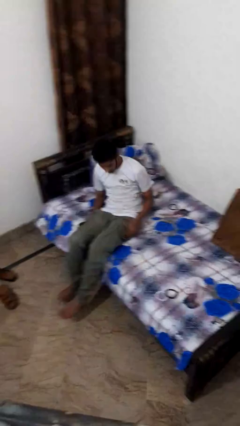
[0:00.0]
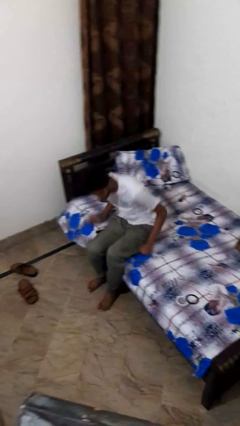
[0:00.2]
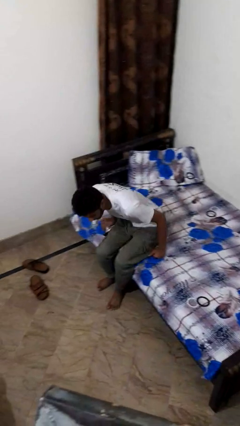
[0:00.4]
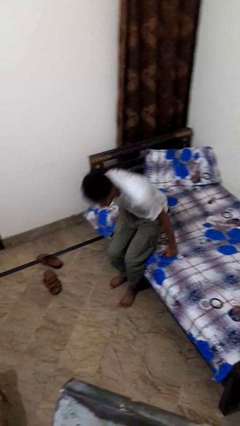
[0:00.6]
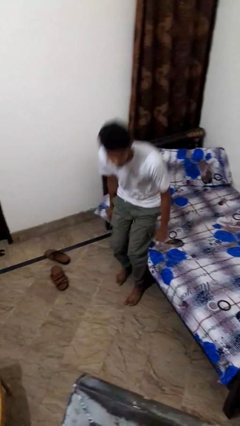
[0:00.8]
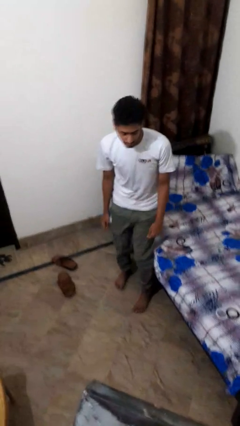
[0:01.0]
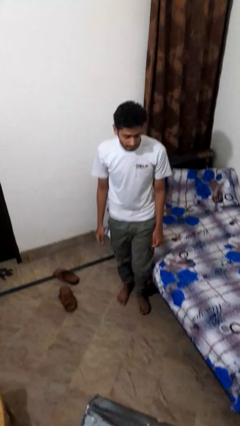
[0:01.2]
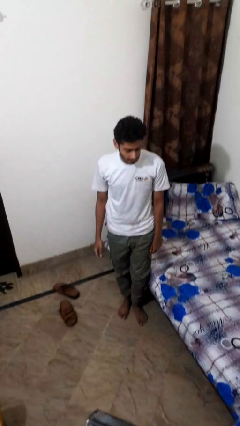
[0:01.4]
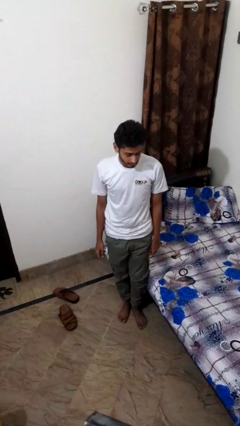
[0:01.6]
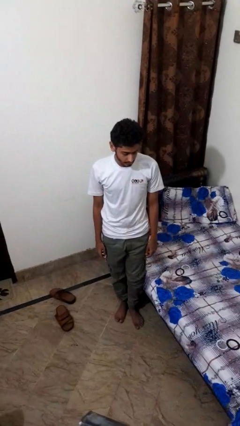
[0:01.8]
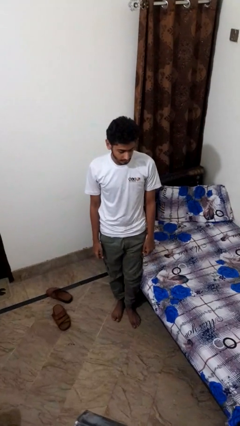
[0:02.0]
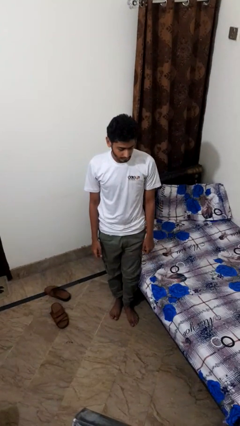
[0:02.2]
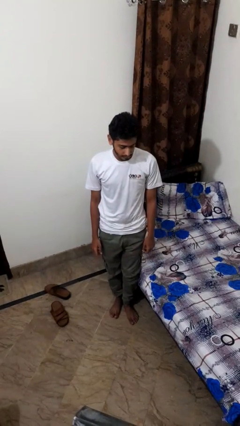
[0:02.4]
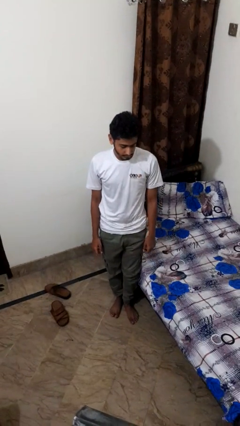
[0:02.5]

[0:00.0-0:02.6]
person stands up

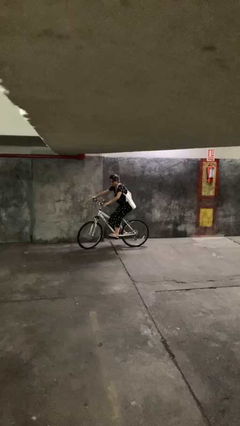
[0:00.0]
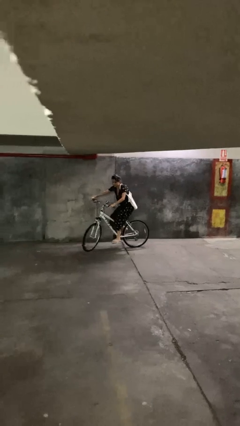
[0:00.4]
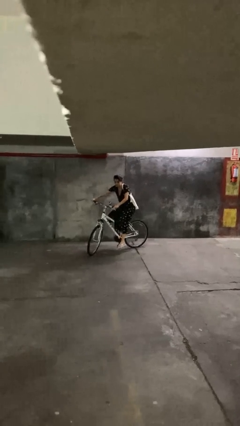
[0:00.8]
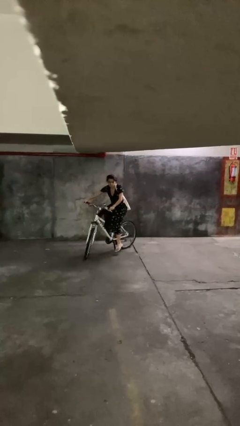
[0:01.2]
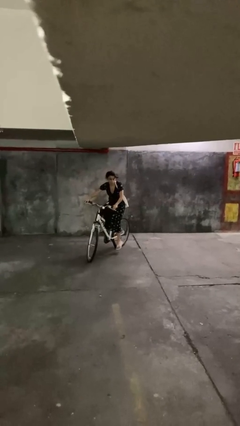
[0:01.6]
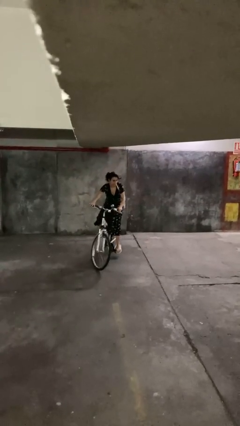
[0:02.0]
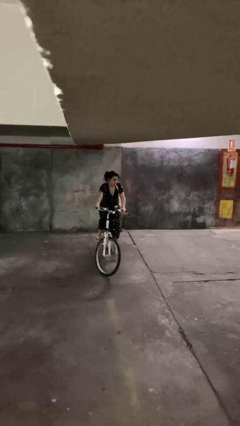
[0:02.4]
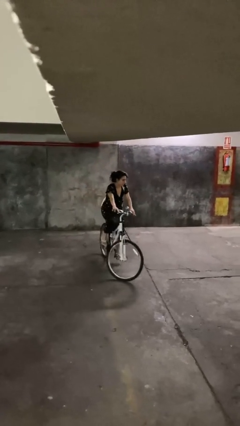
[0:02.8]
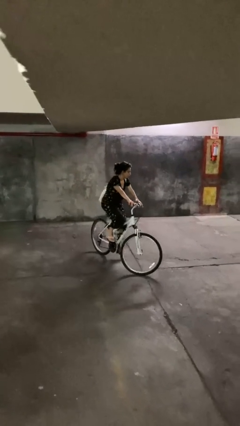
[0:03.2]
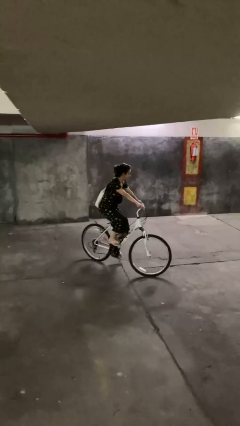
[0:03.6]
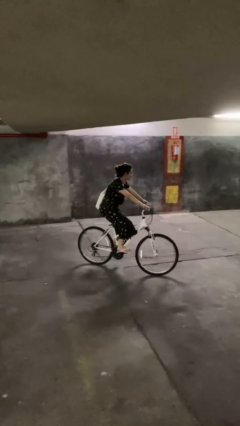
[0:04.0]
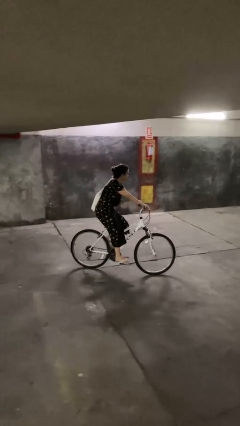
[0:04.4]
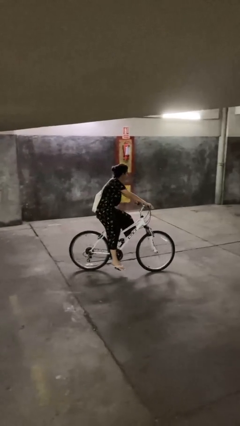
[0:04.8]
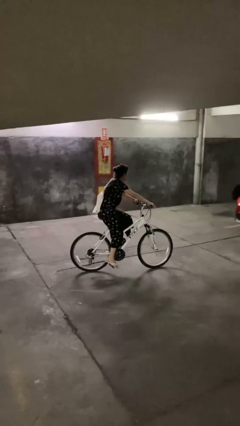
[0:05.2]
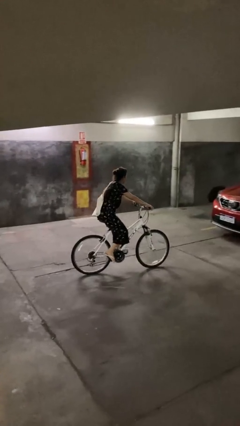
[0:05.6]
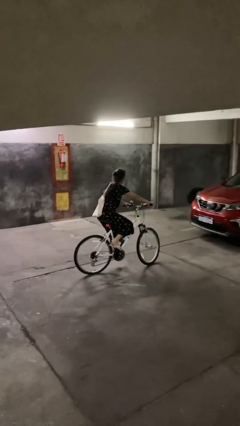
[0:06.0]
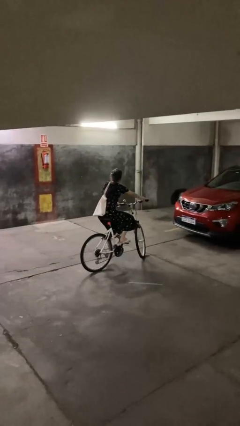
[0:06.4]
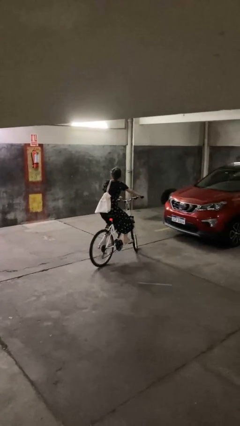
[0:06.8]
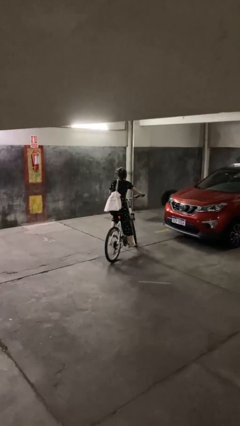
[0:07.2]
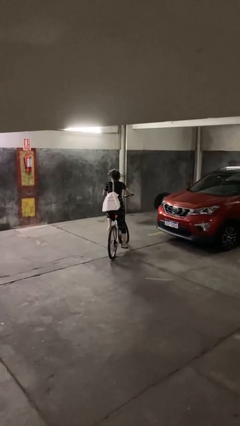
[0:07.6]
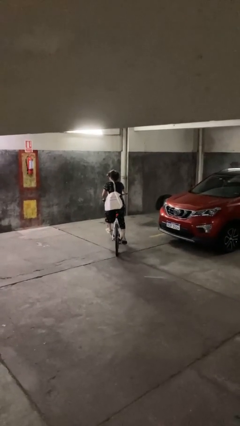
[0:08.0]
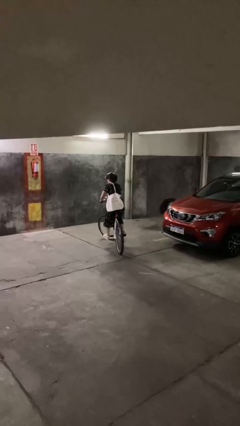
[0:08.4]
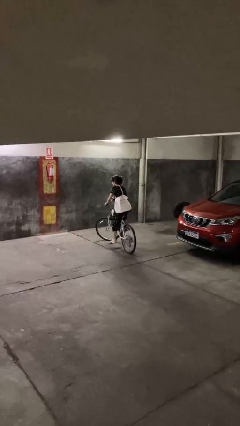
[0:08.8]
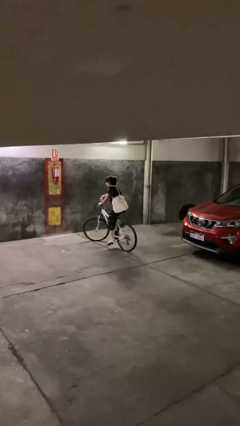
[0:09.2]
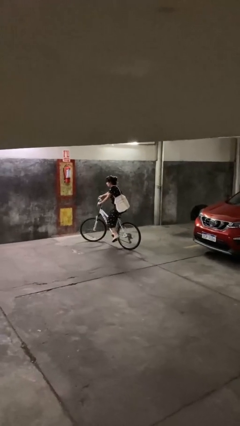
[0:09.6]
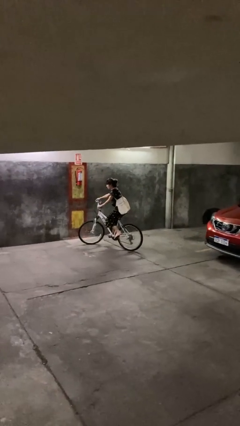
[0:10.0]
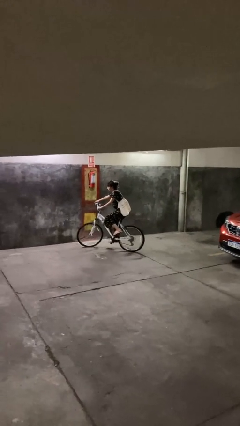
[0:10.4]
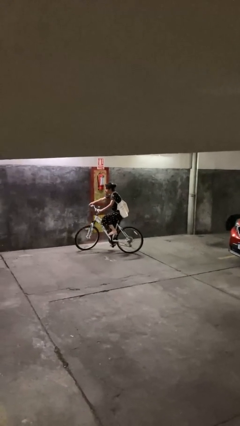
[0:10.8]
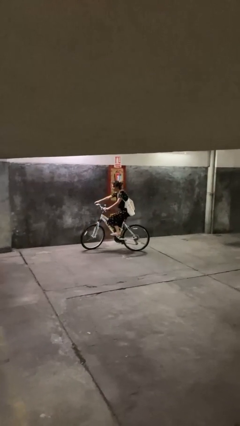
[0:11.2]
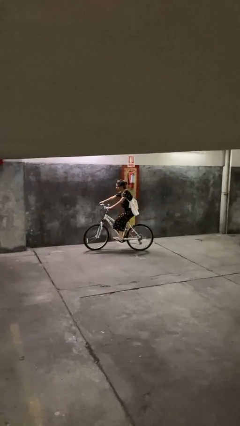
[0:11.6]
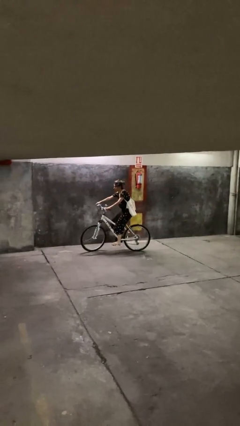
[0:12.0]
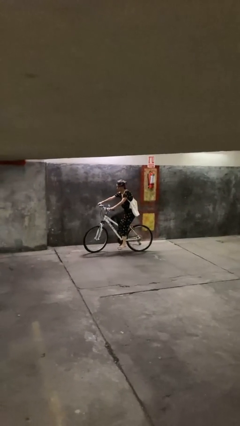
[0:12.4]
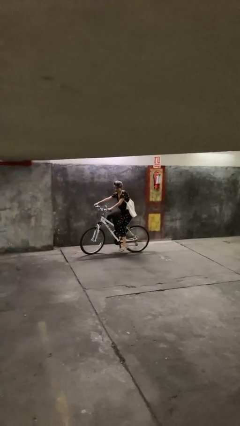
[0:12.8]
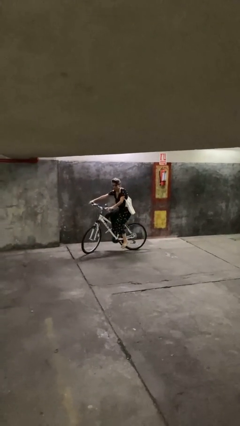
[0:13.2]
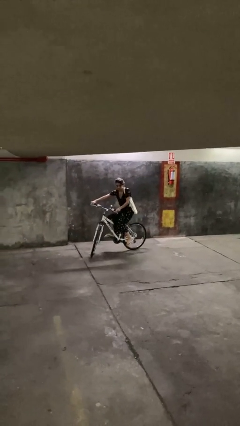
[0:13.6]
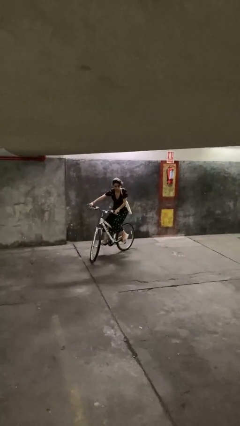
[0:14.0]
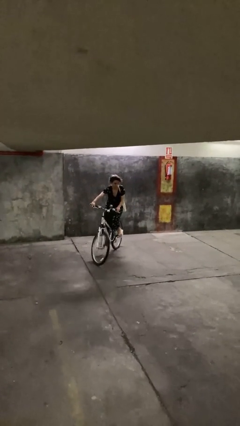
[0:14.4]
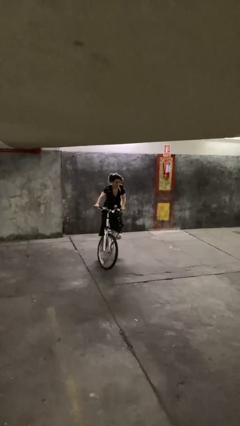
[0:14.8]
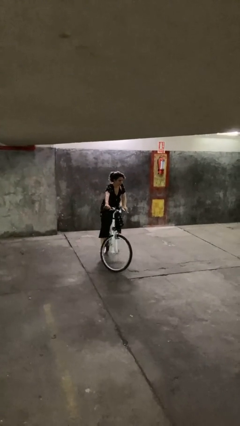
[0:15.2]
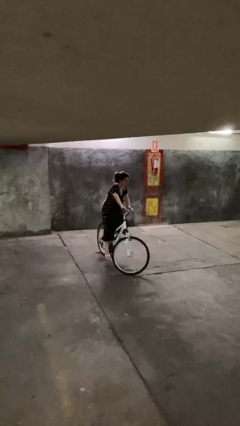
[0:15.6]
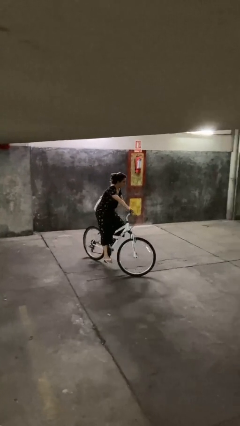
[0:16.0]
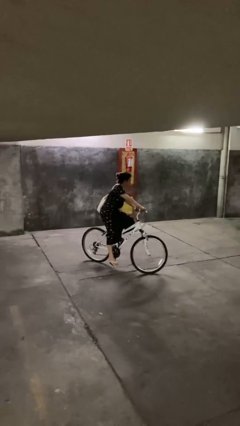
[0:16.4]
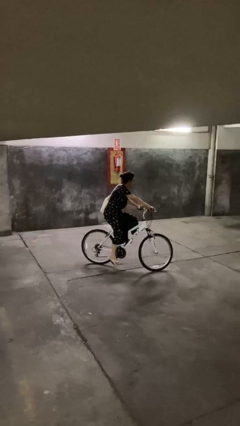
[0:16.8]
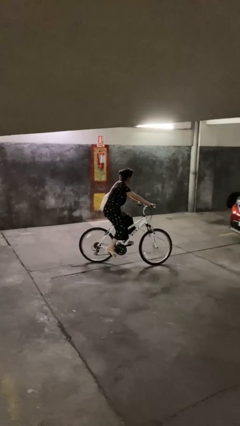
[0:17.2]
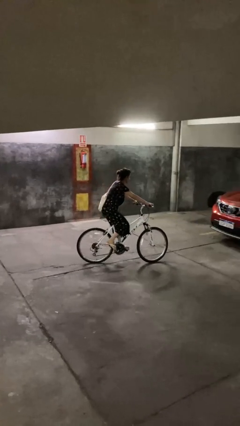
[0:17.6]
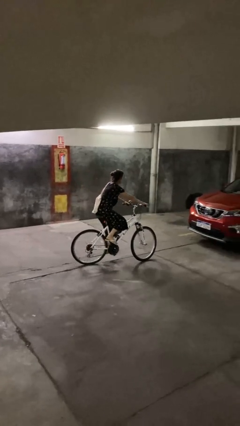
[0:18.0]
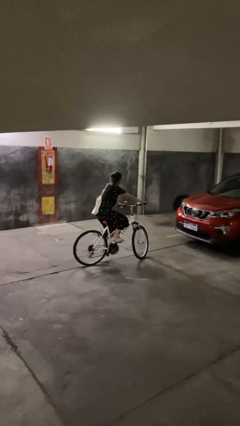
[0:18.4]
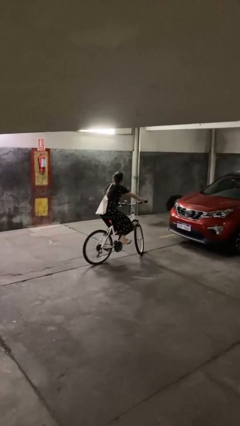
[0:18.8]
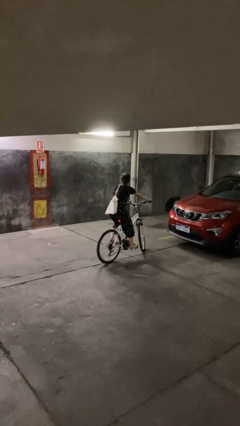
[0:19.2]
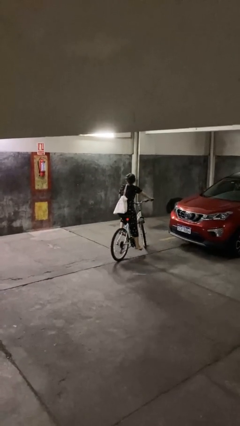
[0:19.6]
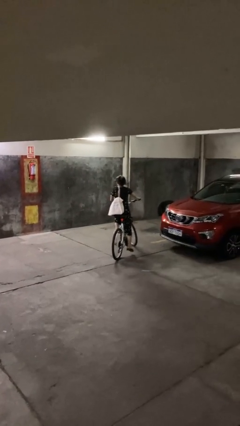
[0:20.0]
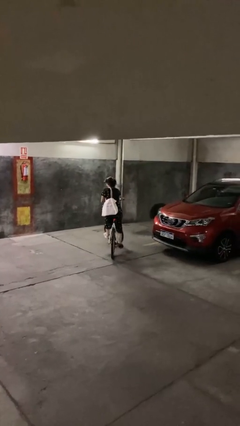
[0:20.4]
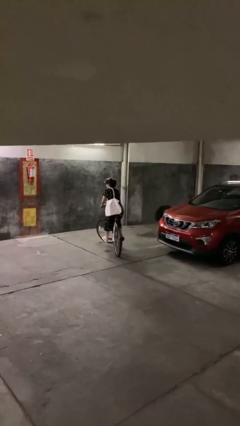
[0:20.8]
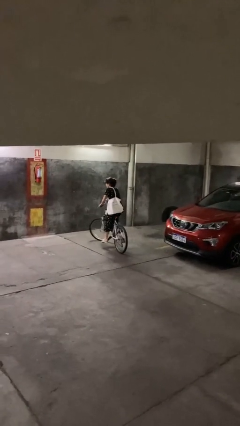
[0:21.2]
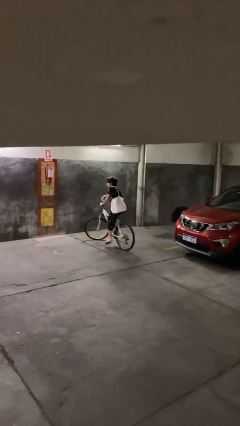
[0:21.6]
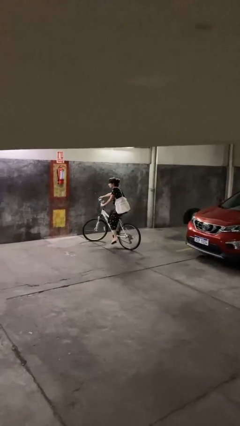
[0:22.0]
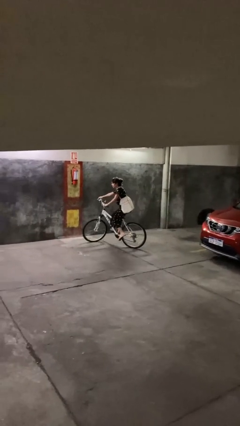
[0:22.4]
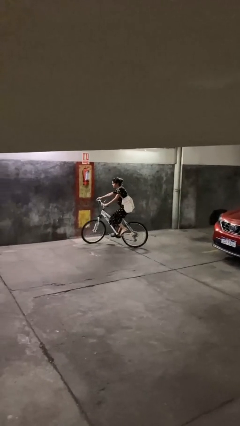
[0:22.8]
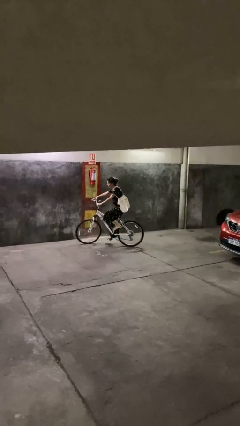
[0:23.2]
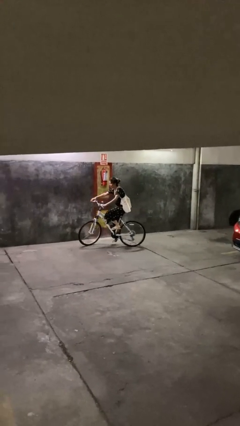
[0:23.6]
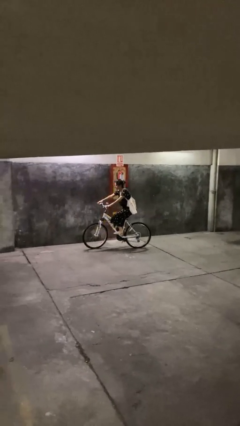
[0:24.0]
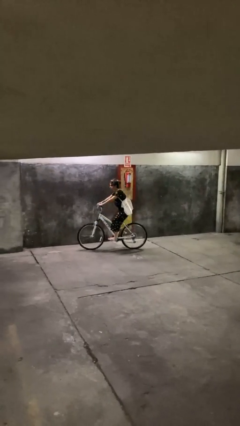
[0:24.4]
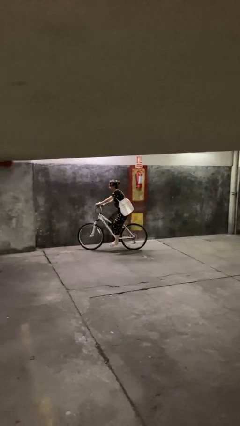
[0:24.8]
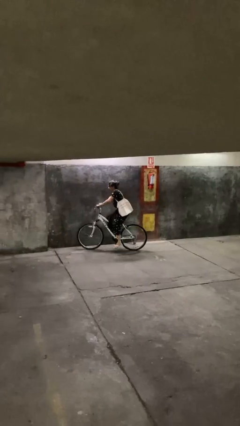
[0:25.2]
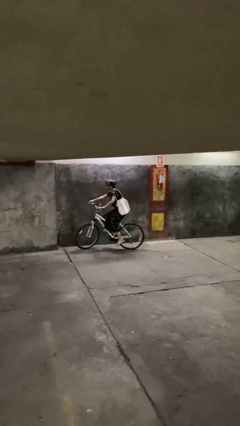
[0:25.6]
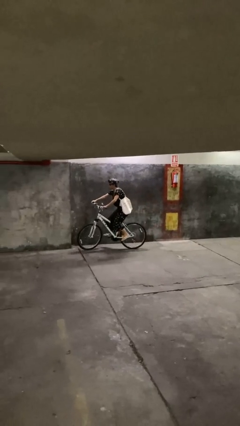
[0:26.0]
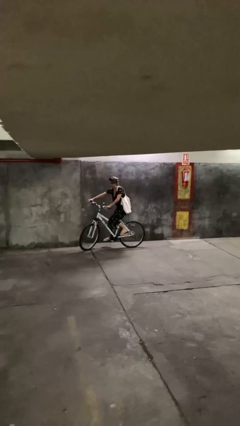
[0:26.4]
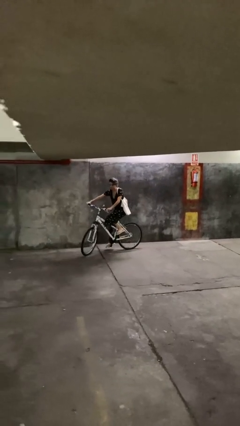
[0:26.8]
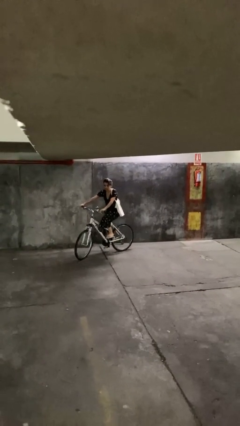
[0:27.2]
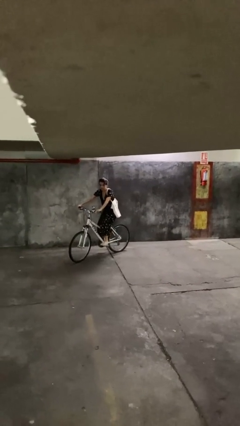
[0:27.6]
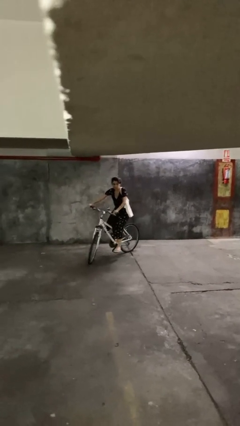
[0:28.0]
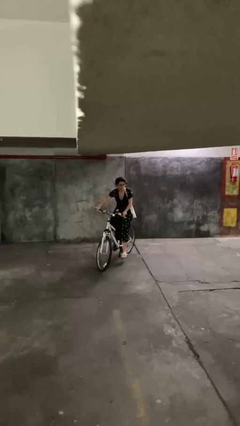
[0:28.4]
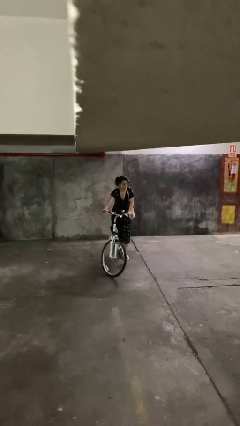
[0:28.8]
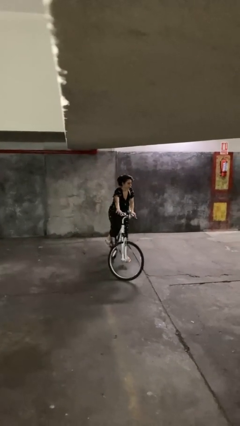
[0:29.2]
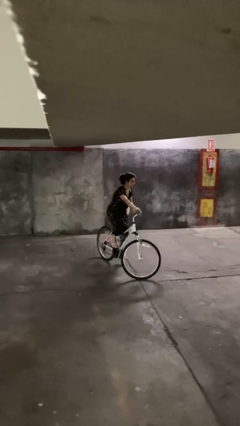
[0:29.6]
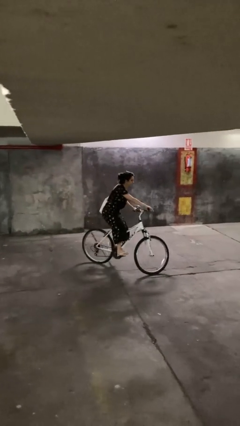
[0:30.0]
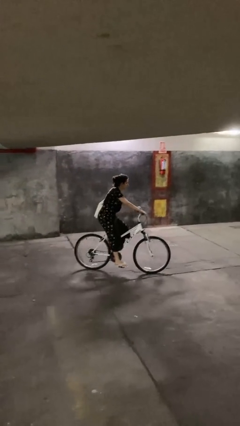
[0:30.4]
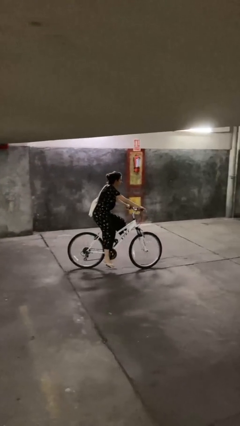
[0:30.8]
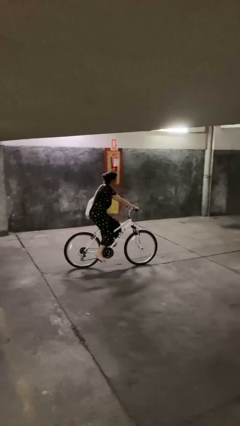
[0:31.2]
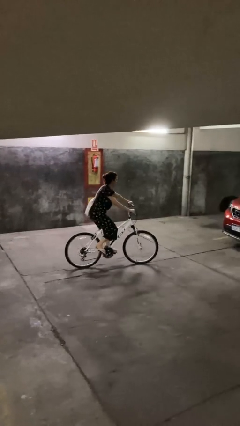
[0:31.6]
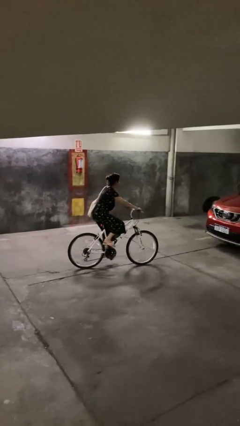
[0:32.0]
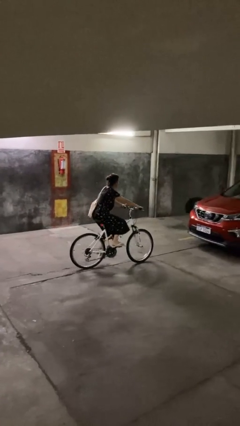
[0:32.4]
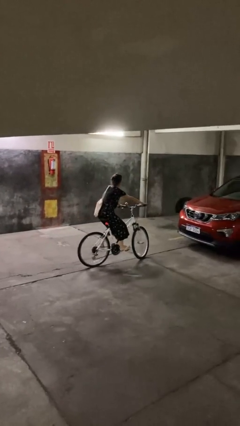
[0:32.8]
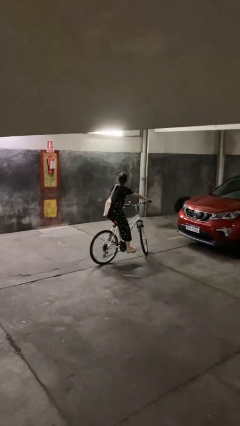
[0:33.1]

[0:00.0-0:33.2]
person rides bicycle
